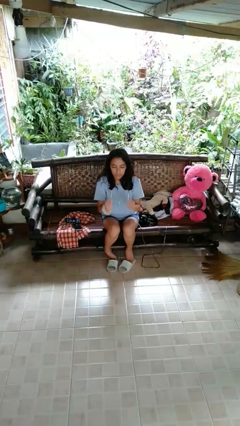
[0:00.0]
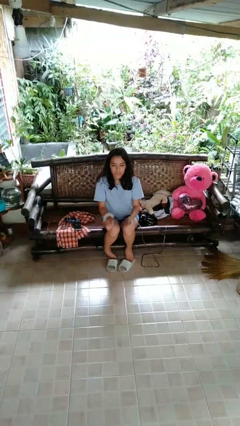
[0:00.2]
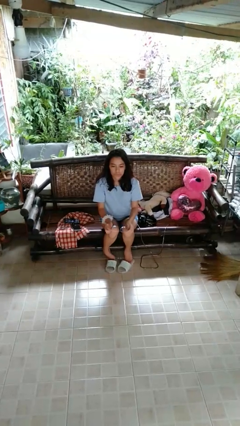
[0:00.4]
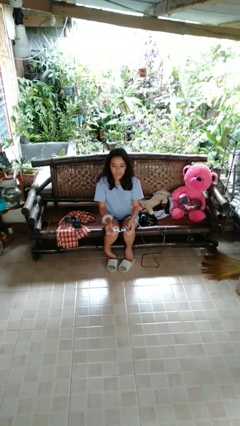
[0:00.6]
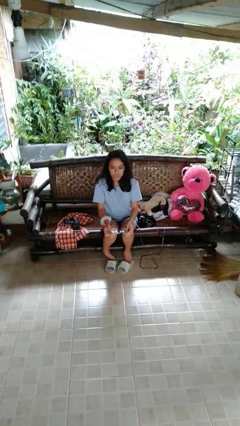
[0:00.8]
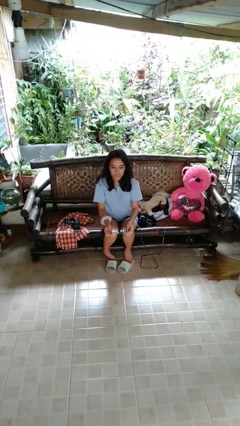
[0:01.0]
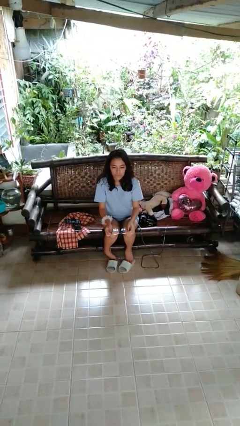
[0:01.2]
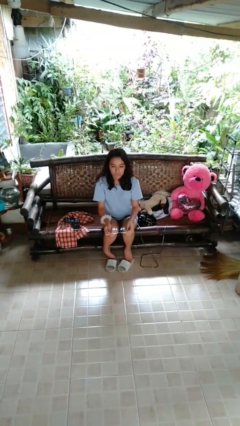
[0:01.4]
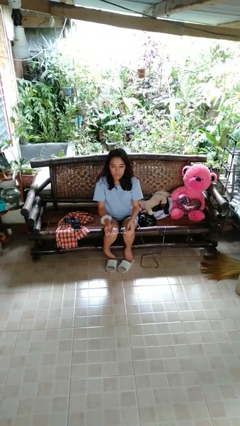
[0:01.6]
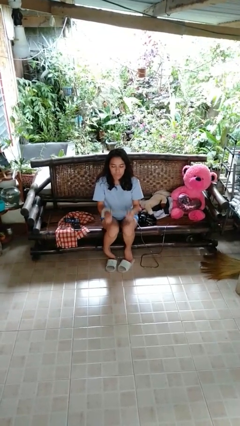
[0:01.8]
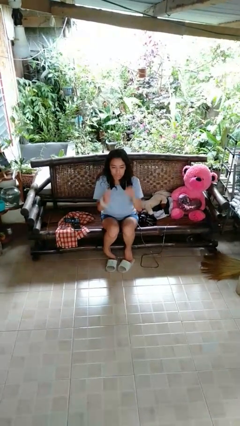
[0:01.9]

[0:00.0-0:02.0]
person grabs person by forearm

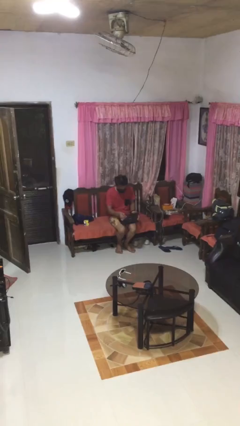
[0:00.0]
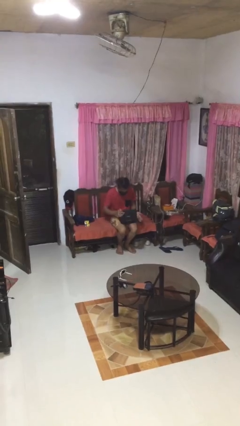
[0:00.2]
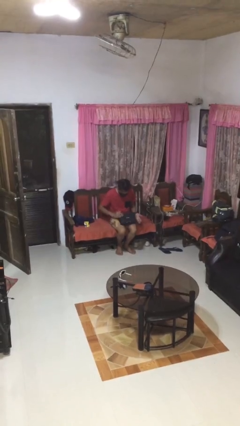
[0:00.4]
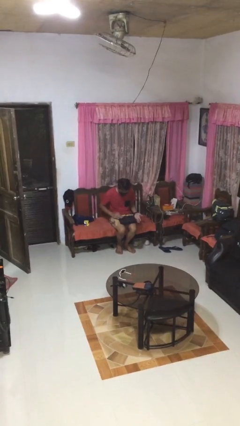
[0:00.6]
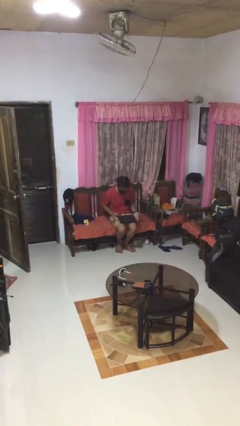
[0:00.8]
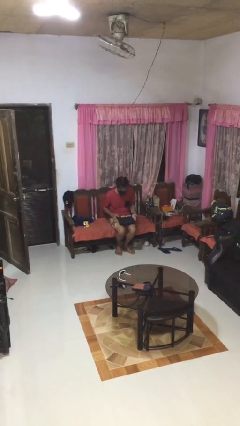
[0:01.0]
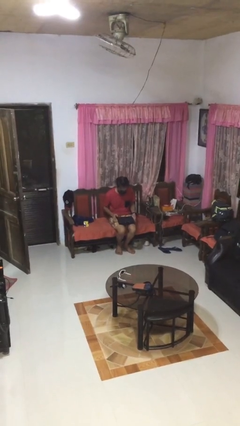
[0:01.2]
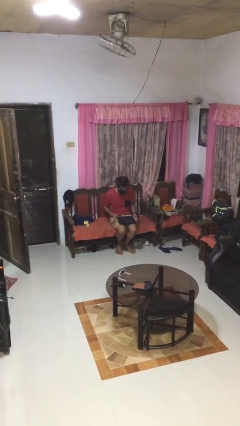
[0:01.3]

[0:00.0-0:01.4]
person closes laptop

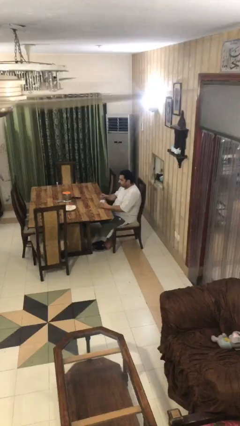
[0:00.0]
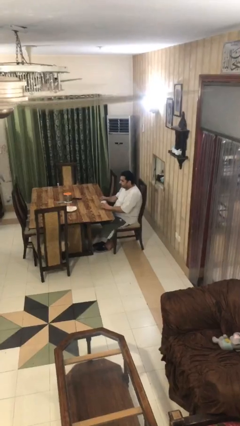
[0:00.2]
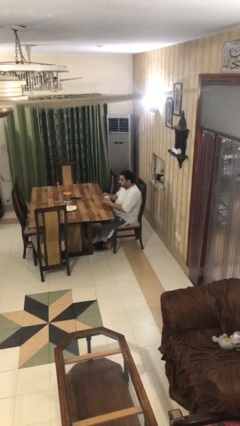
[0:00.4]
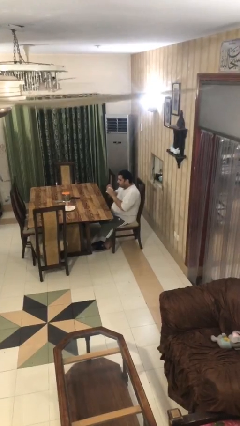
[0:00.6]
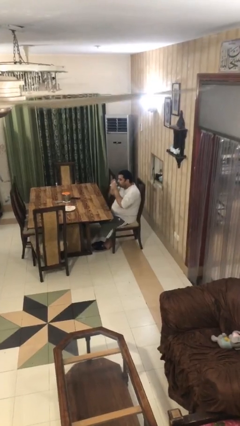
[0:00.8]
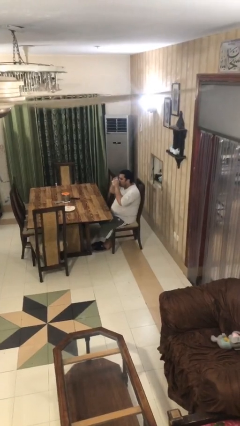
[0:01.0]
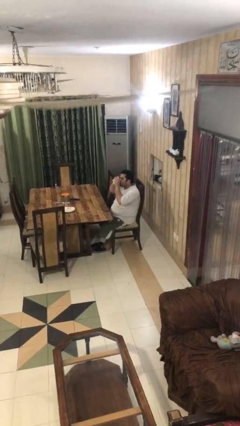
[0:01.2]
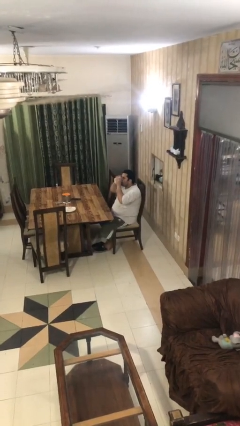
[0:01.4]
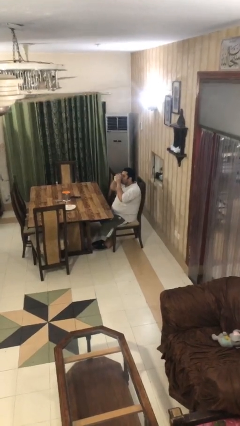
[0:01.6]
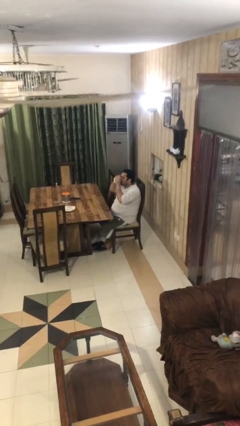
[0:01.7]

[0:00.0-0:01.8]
person drinks from mug

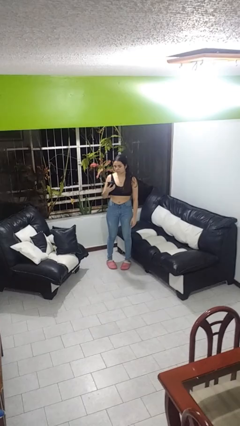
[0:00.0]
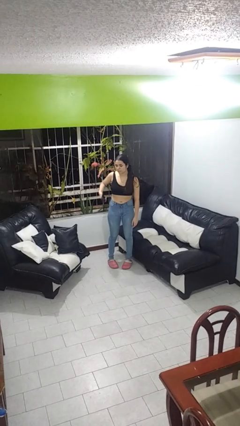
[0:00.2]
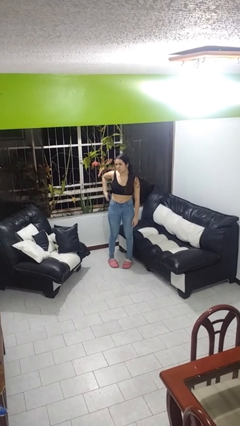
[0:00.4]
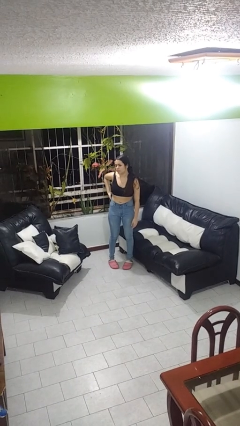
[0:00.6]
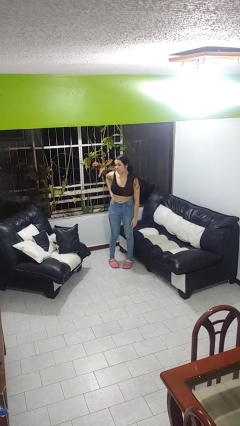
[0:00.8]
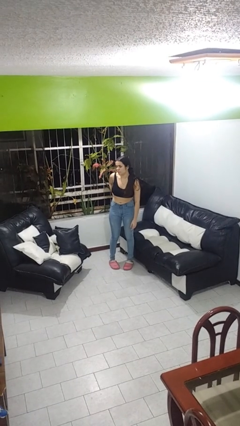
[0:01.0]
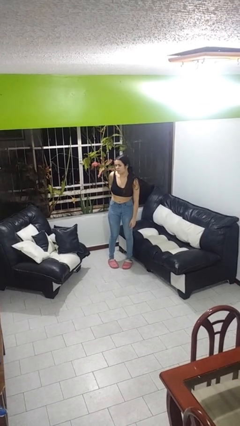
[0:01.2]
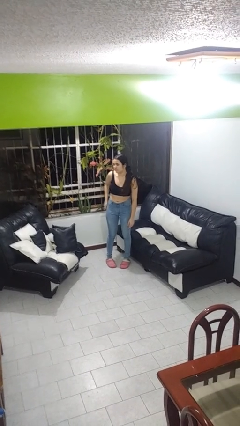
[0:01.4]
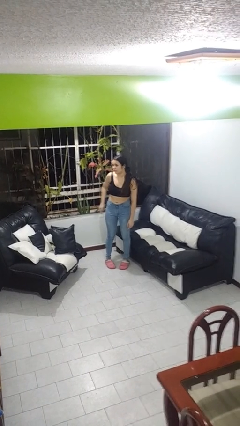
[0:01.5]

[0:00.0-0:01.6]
person puts phone into pocket

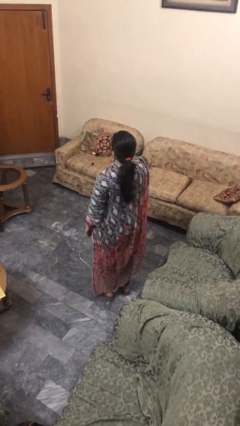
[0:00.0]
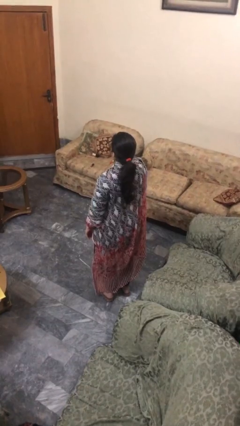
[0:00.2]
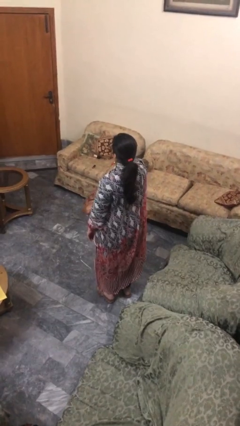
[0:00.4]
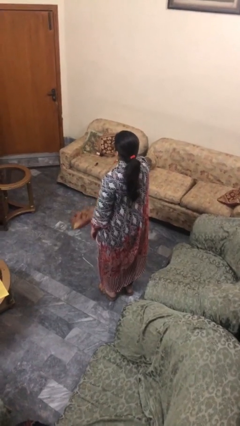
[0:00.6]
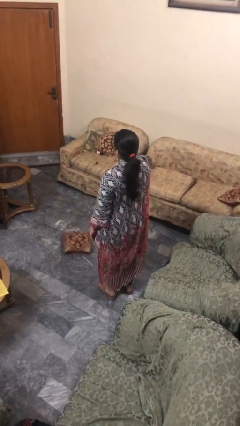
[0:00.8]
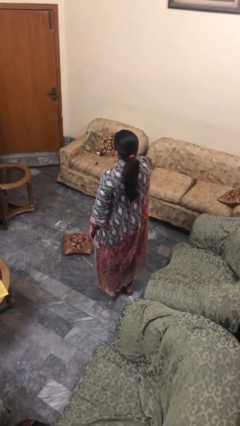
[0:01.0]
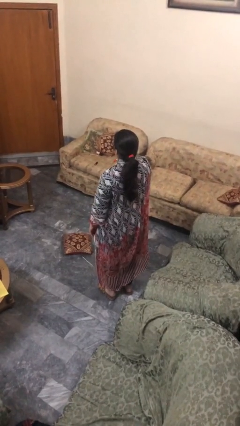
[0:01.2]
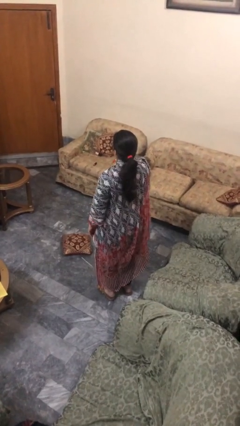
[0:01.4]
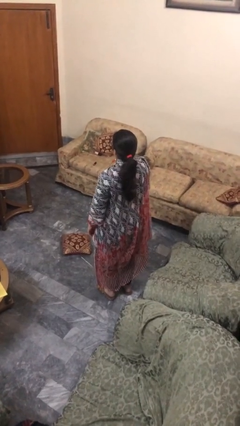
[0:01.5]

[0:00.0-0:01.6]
person throws object to ground

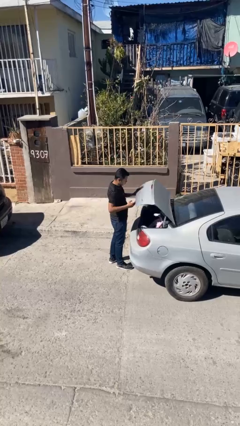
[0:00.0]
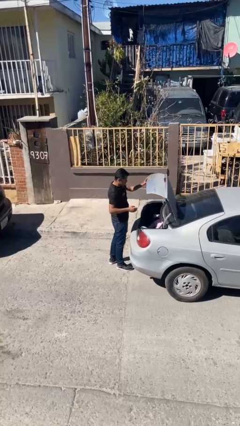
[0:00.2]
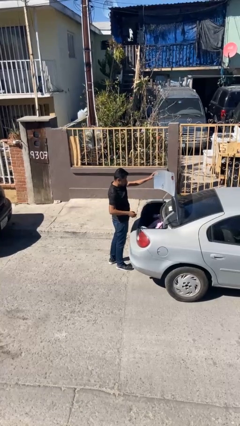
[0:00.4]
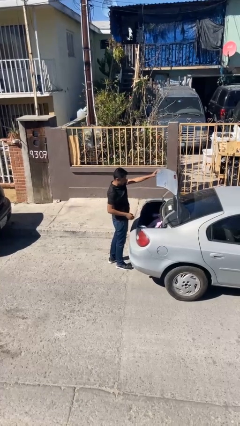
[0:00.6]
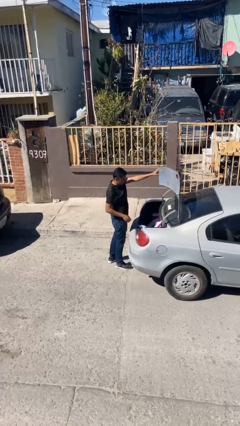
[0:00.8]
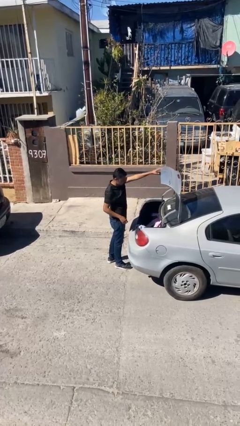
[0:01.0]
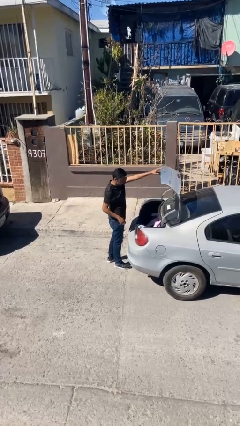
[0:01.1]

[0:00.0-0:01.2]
person opens car trunk

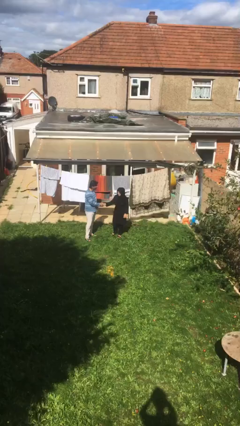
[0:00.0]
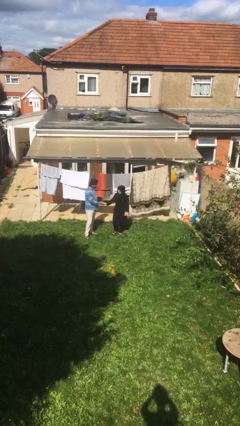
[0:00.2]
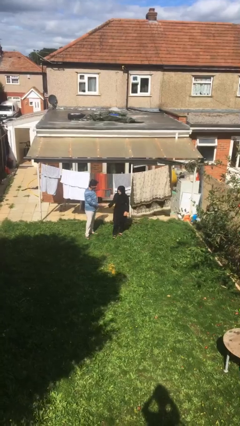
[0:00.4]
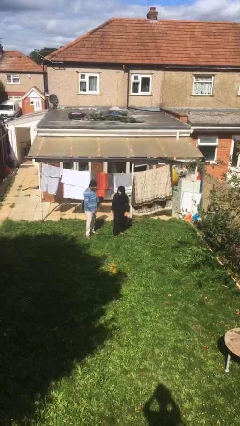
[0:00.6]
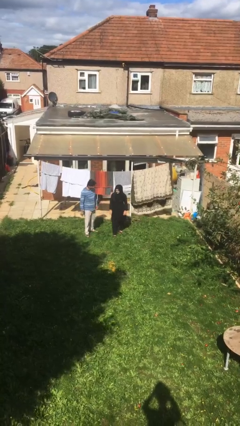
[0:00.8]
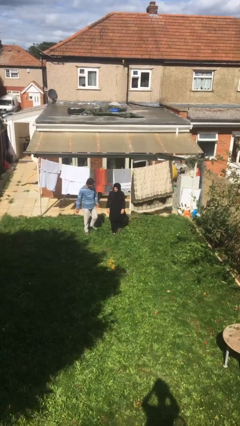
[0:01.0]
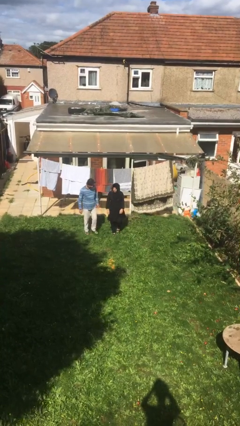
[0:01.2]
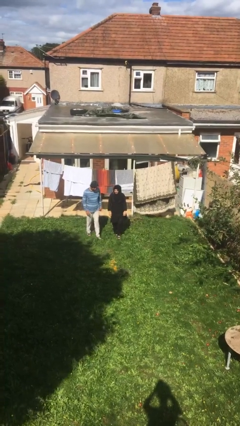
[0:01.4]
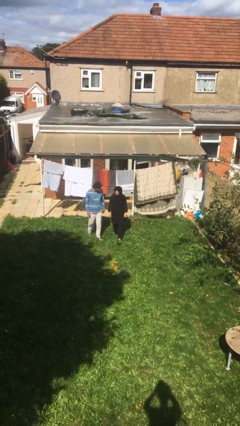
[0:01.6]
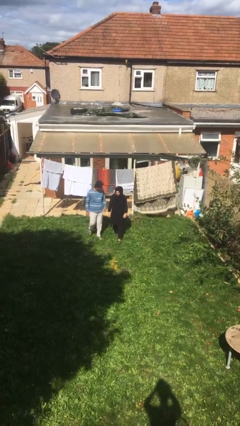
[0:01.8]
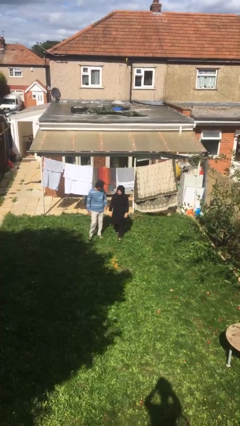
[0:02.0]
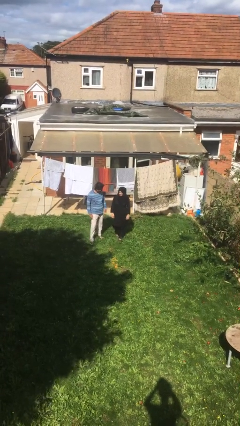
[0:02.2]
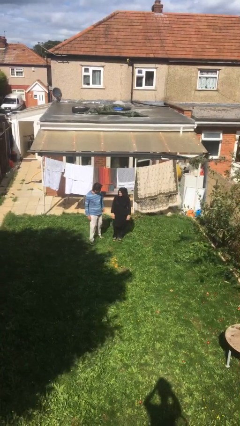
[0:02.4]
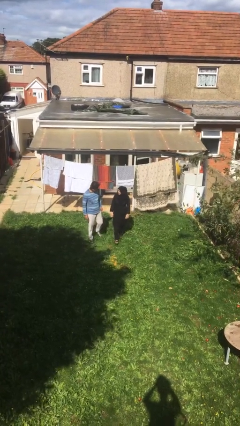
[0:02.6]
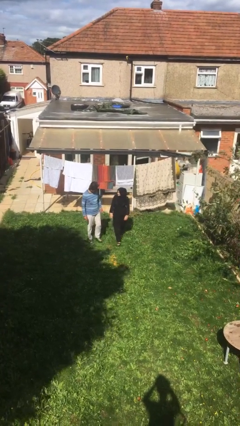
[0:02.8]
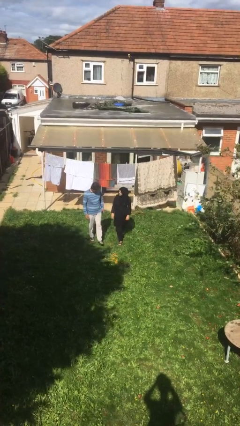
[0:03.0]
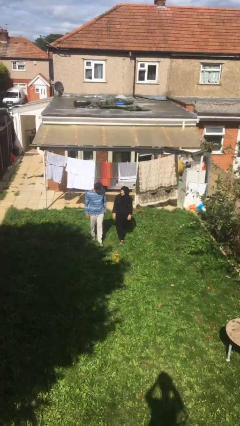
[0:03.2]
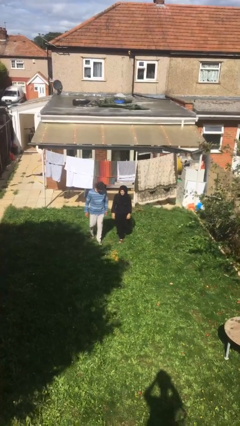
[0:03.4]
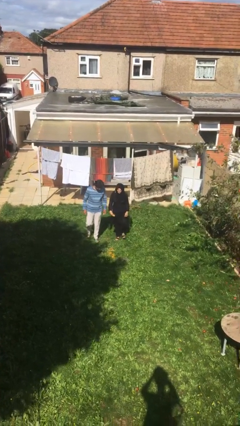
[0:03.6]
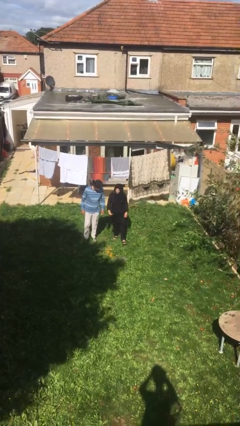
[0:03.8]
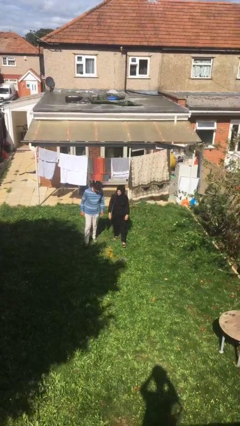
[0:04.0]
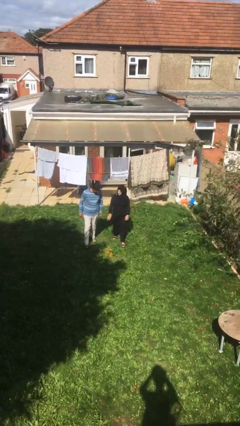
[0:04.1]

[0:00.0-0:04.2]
person talks to person

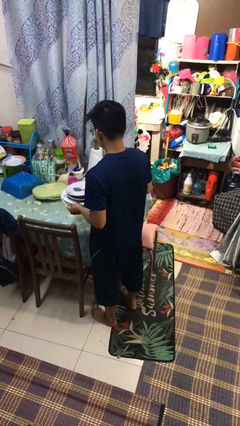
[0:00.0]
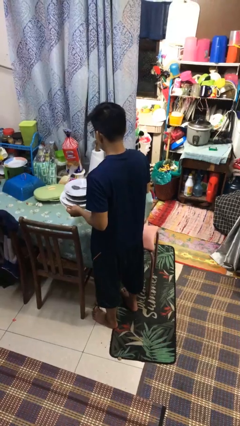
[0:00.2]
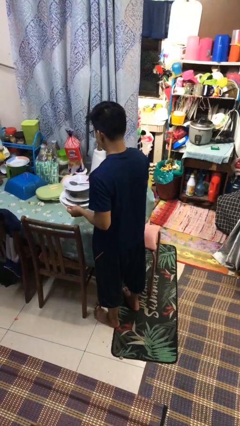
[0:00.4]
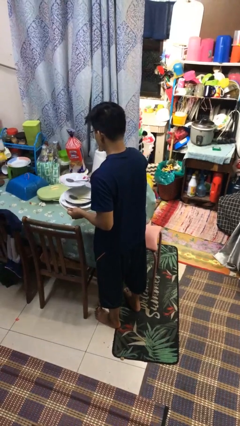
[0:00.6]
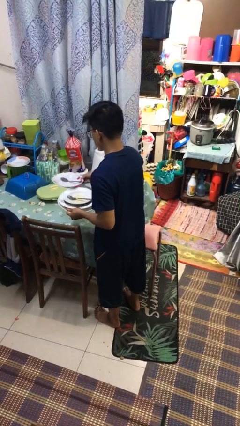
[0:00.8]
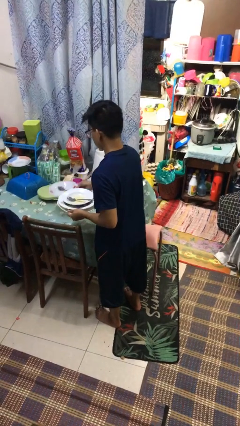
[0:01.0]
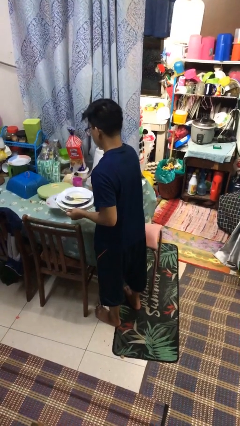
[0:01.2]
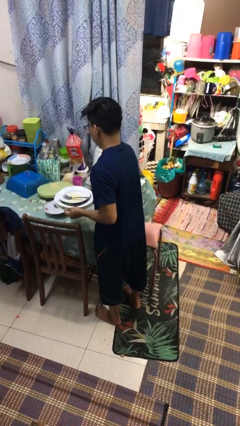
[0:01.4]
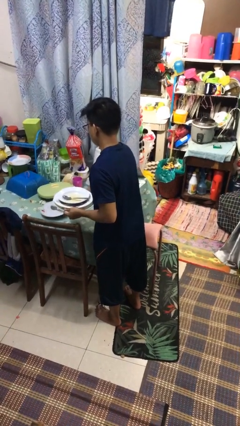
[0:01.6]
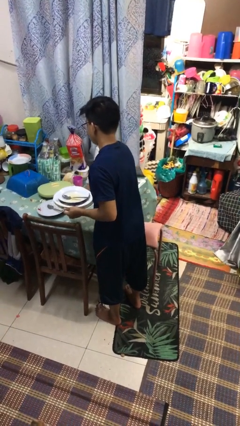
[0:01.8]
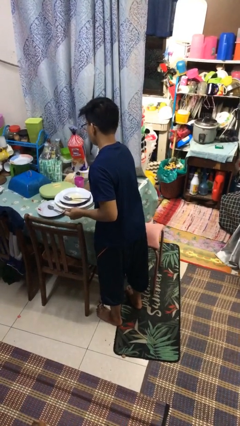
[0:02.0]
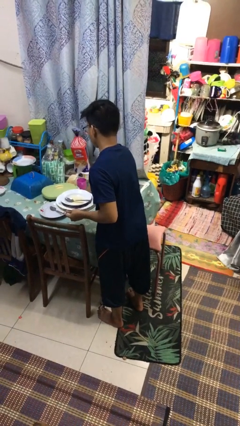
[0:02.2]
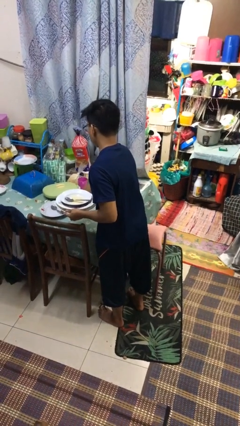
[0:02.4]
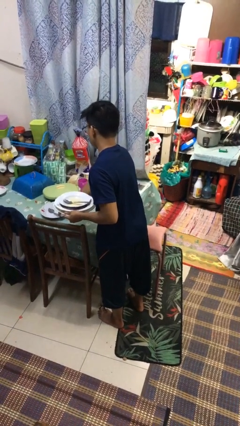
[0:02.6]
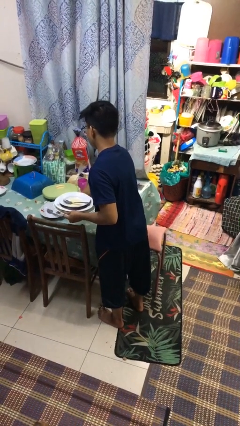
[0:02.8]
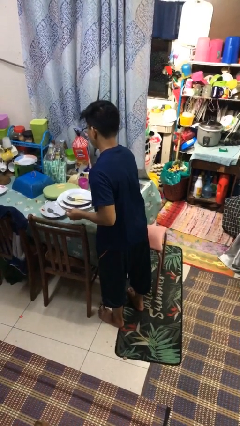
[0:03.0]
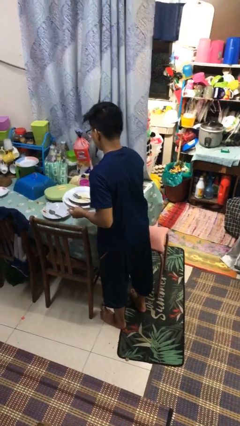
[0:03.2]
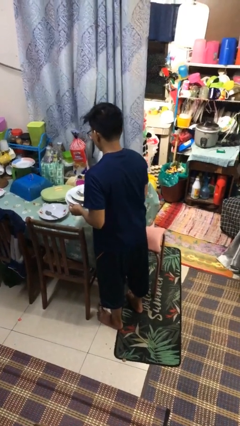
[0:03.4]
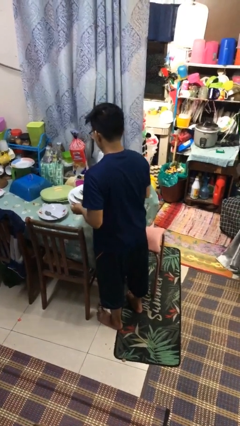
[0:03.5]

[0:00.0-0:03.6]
person sets table
